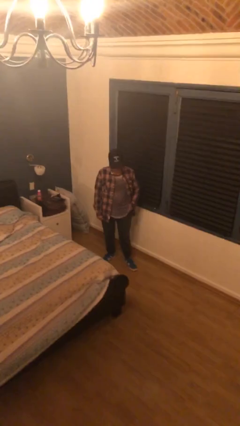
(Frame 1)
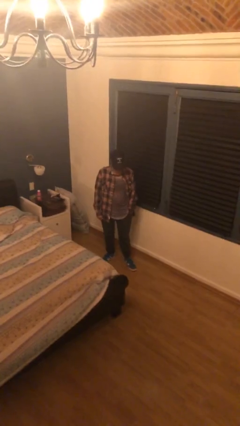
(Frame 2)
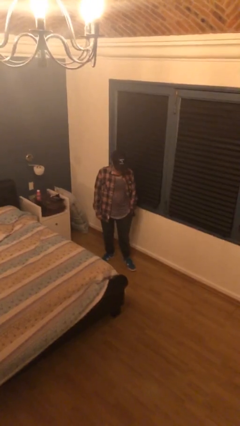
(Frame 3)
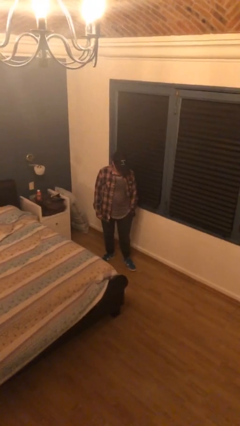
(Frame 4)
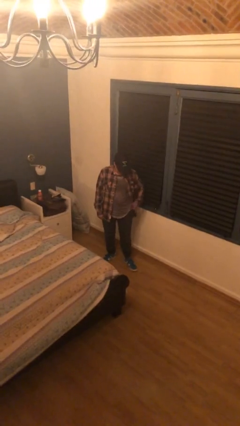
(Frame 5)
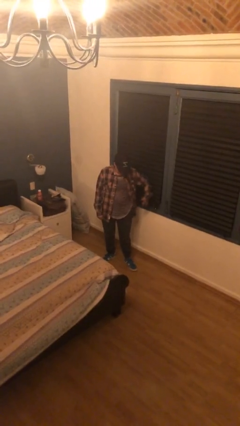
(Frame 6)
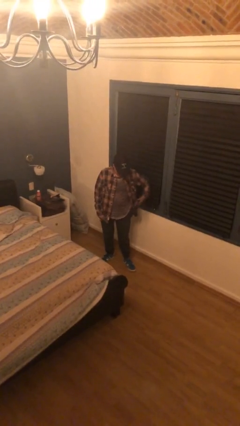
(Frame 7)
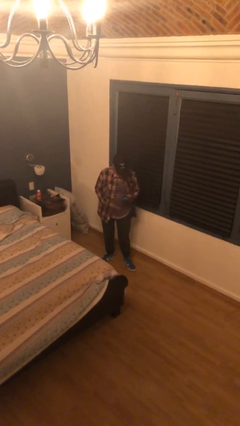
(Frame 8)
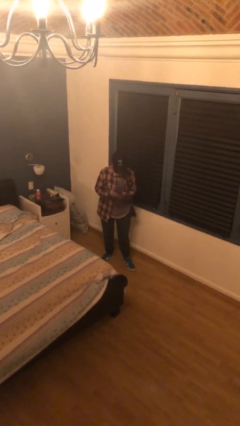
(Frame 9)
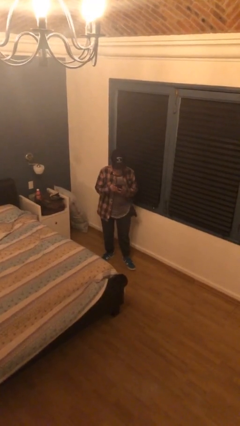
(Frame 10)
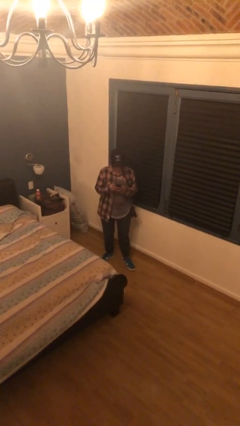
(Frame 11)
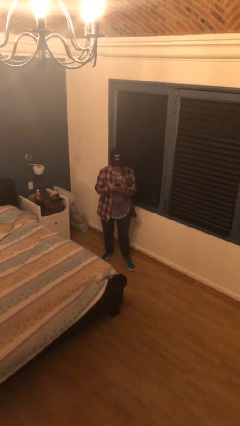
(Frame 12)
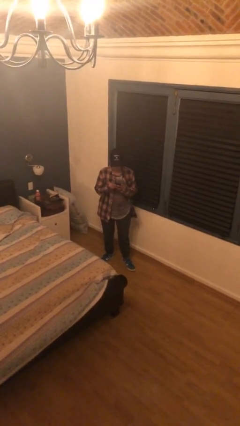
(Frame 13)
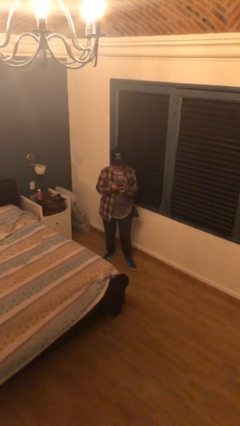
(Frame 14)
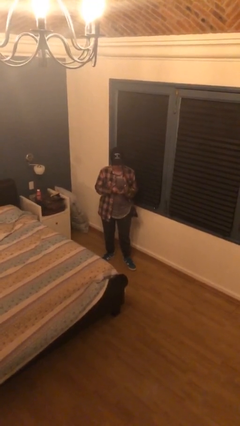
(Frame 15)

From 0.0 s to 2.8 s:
person takes phone from pocket

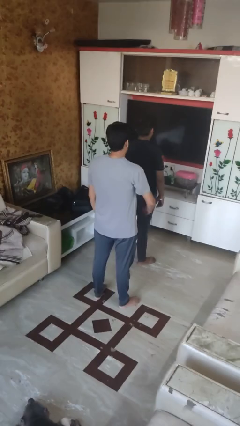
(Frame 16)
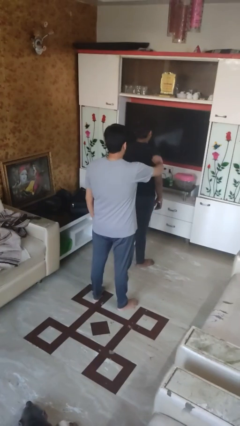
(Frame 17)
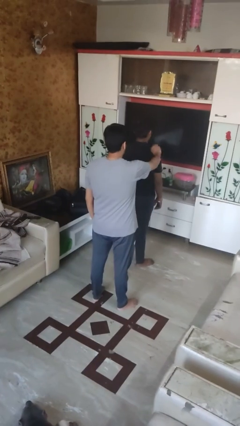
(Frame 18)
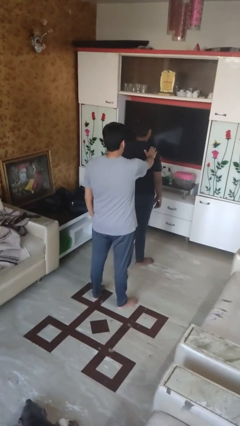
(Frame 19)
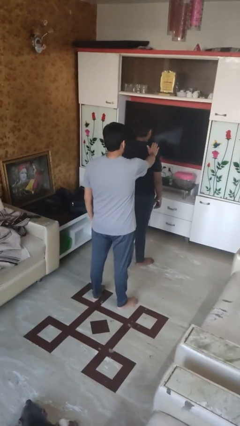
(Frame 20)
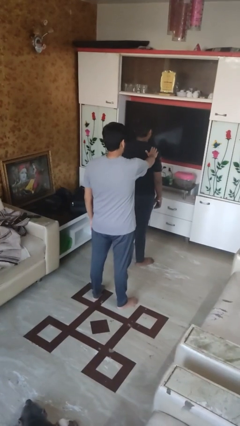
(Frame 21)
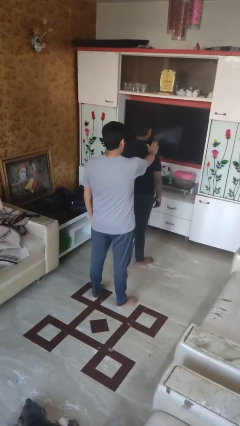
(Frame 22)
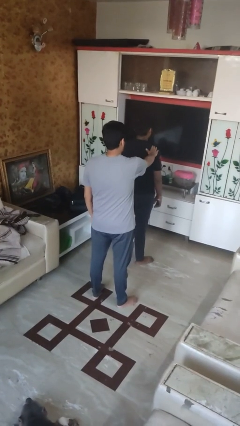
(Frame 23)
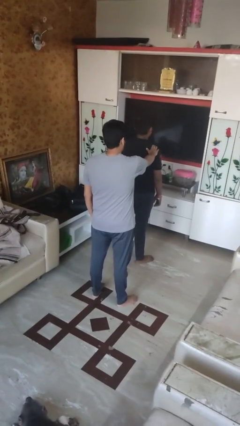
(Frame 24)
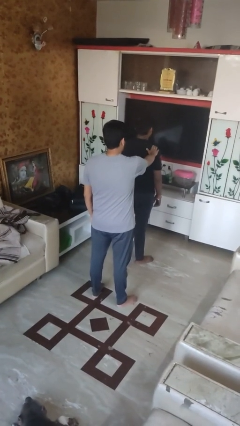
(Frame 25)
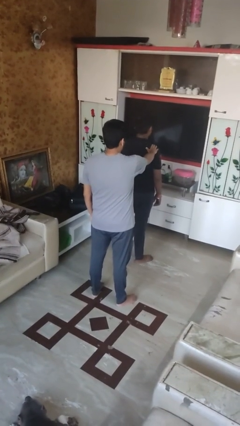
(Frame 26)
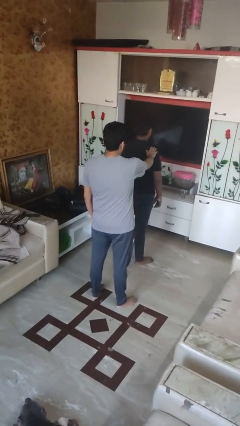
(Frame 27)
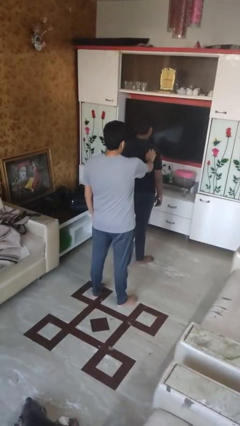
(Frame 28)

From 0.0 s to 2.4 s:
person pounds shoulders of person

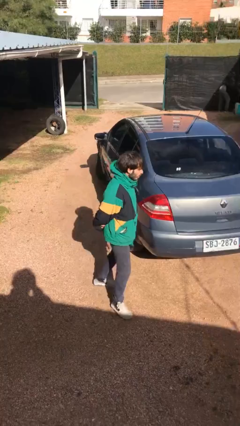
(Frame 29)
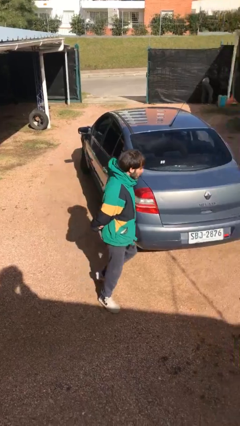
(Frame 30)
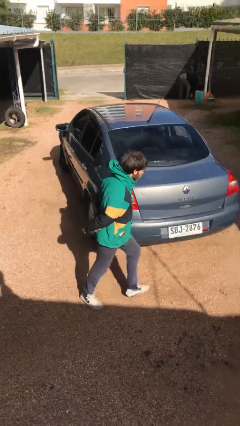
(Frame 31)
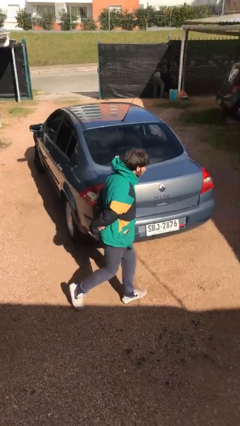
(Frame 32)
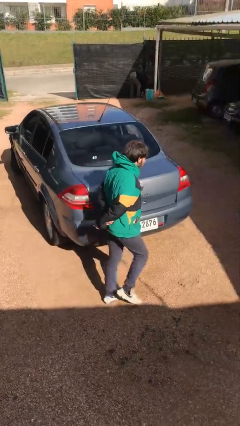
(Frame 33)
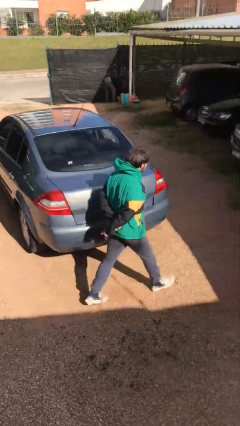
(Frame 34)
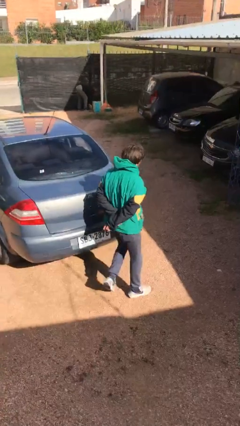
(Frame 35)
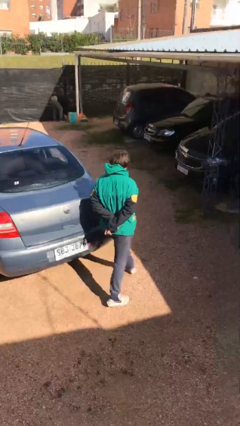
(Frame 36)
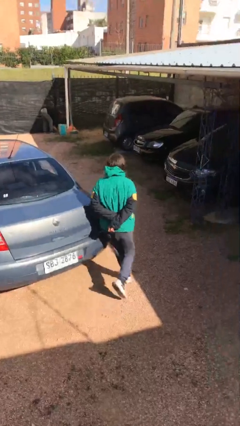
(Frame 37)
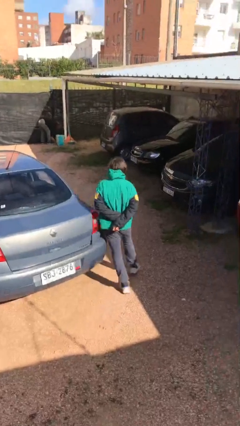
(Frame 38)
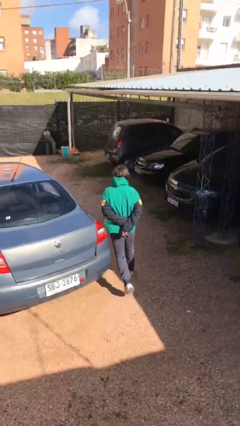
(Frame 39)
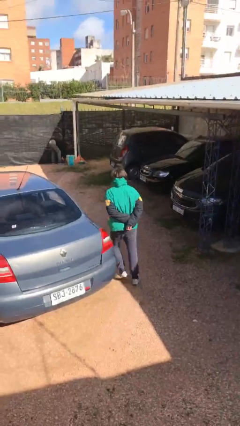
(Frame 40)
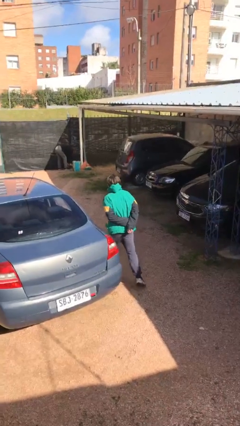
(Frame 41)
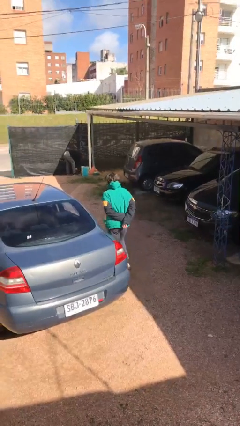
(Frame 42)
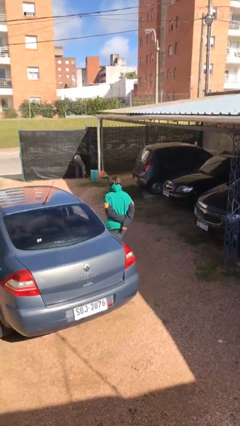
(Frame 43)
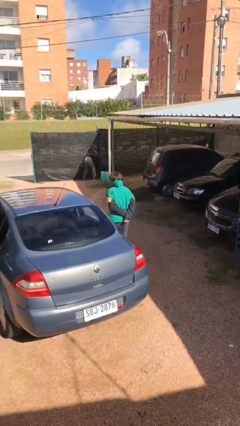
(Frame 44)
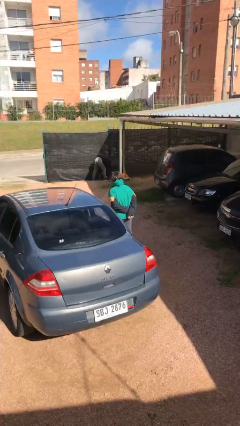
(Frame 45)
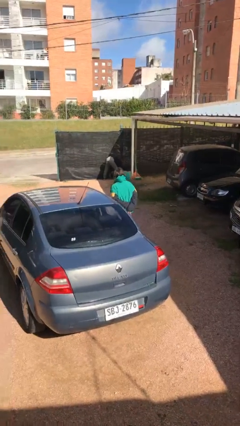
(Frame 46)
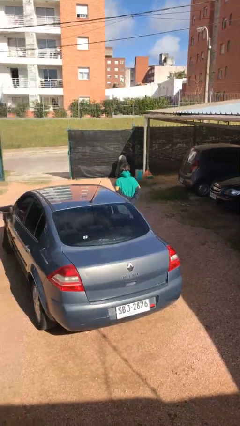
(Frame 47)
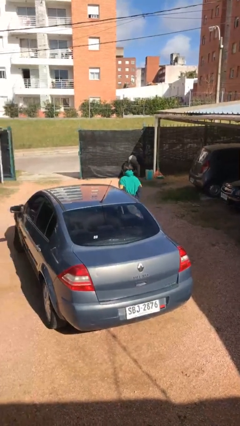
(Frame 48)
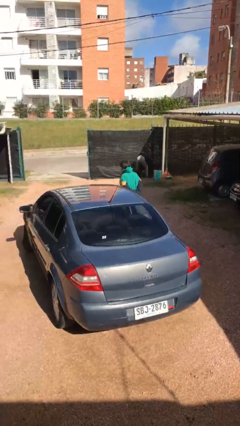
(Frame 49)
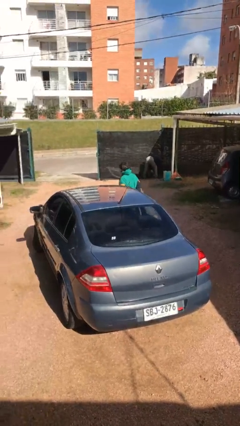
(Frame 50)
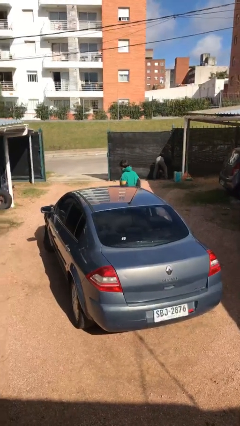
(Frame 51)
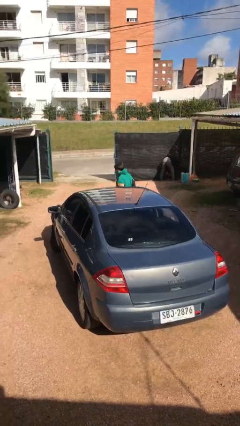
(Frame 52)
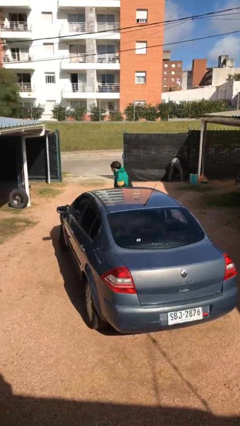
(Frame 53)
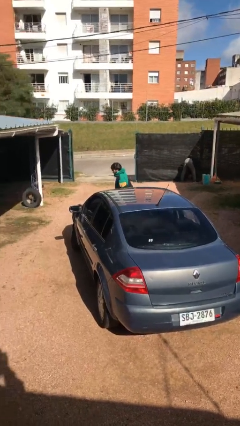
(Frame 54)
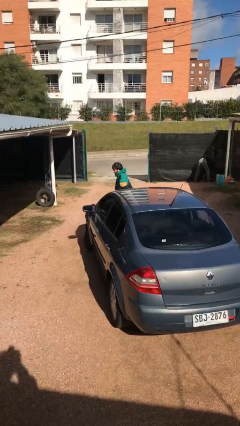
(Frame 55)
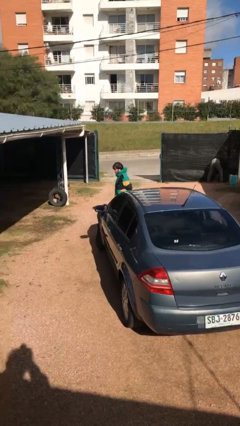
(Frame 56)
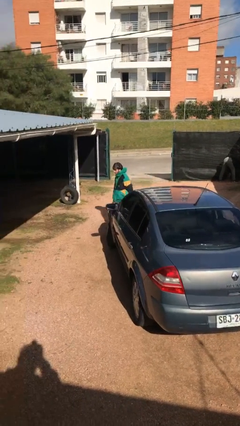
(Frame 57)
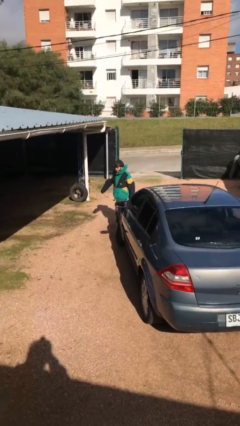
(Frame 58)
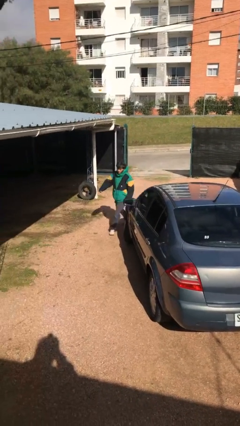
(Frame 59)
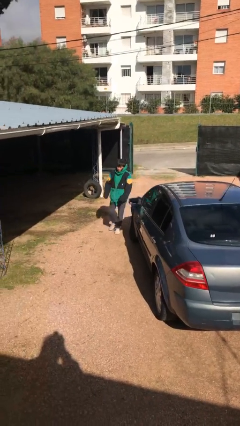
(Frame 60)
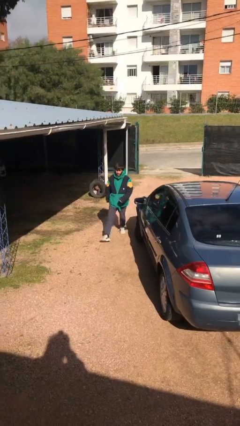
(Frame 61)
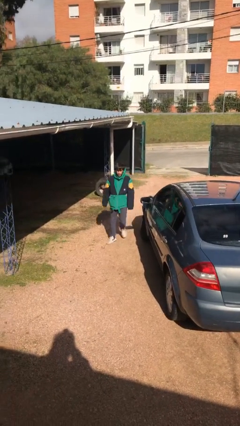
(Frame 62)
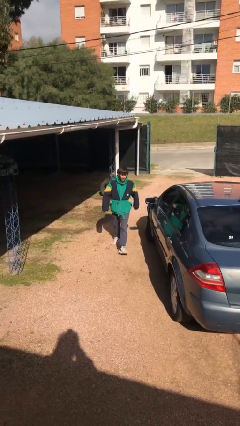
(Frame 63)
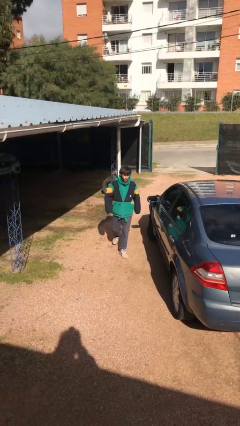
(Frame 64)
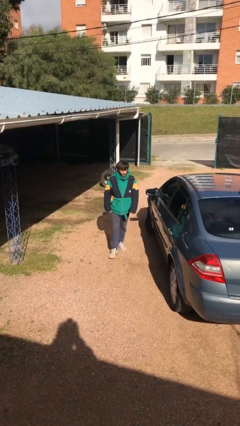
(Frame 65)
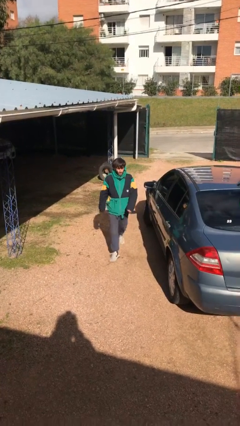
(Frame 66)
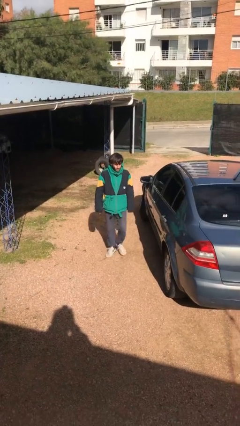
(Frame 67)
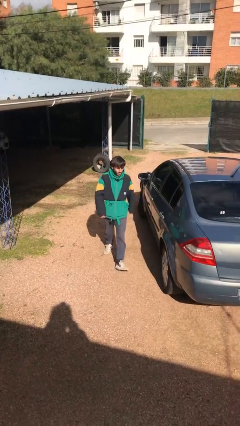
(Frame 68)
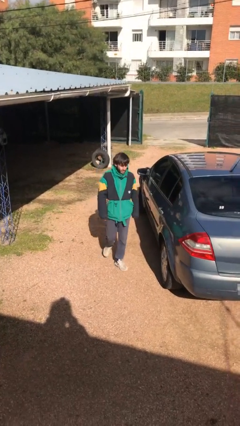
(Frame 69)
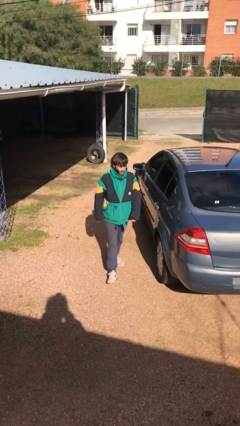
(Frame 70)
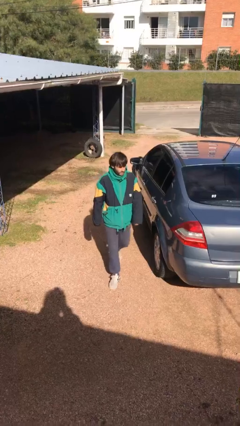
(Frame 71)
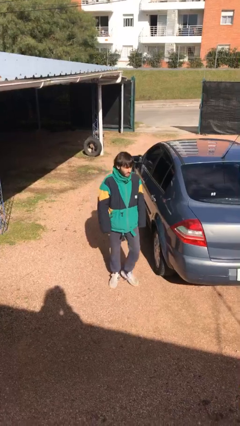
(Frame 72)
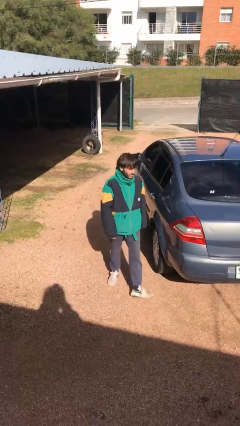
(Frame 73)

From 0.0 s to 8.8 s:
person walks around car

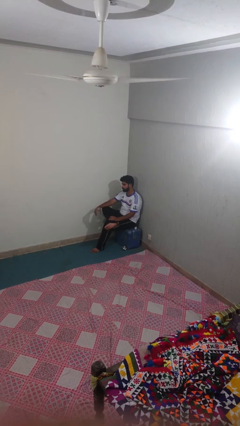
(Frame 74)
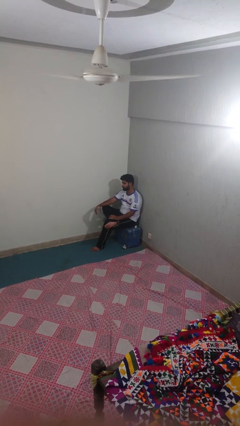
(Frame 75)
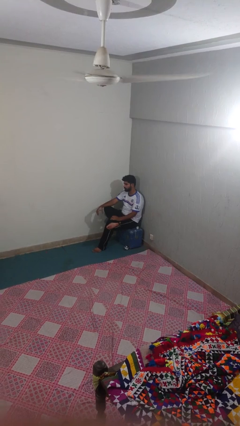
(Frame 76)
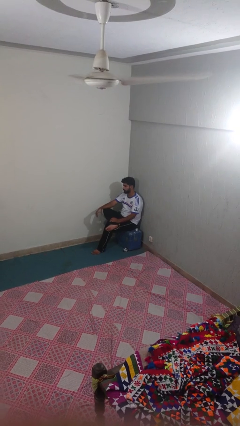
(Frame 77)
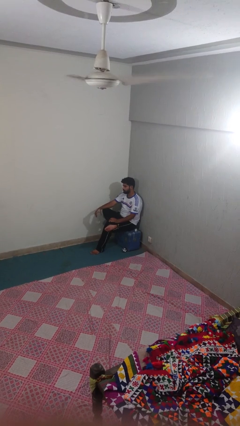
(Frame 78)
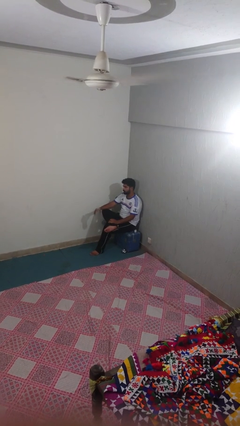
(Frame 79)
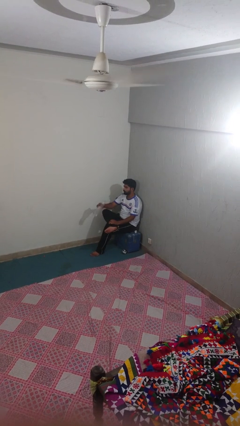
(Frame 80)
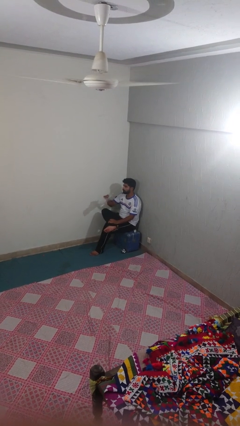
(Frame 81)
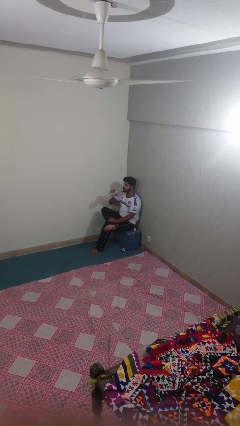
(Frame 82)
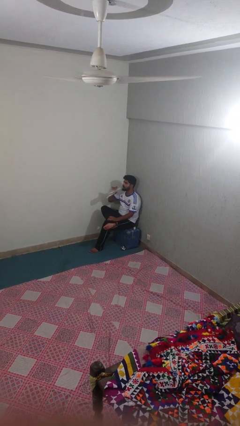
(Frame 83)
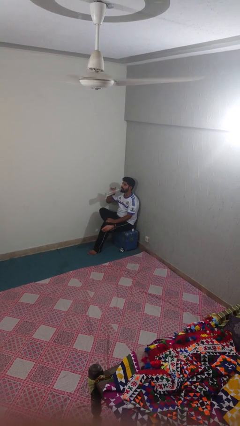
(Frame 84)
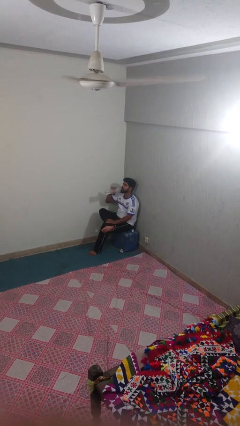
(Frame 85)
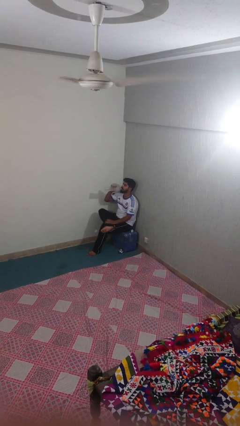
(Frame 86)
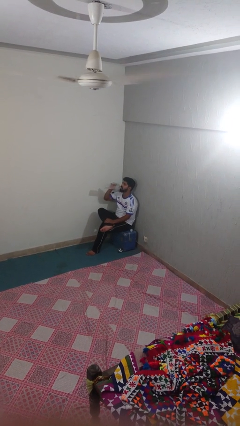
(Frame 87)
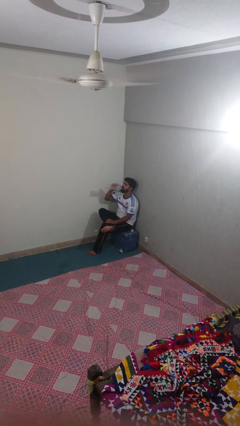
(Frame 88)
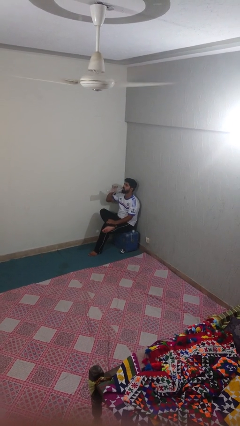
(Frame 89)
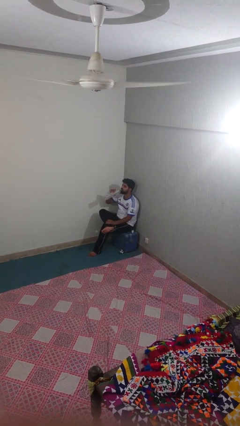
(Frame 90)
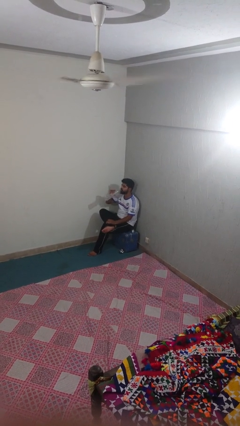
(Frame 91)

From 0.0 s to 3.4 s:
person drinks from bottle

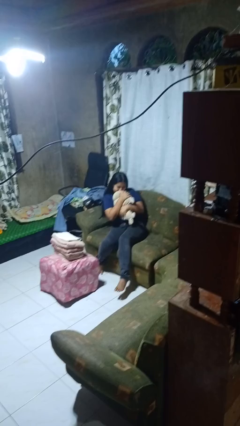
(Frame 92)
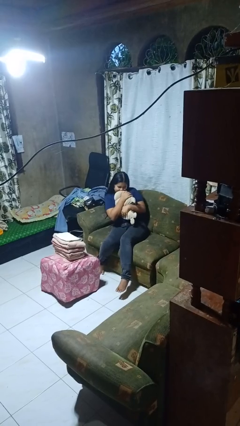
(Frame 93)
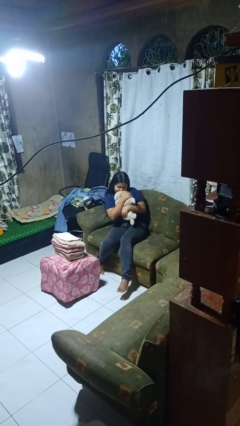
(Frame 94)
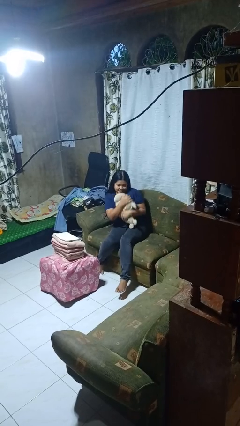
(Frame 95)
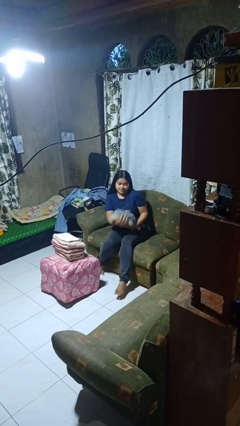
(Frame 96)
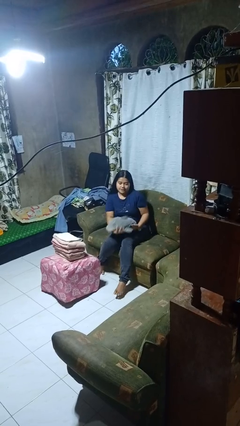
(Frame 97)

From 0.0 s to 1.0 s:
person hugs stuffed animal
